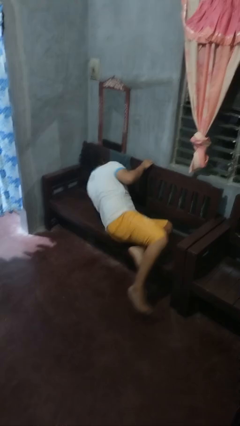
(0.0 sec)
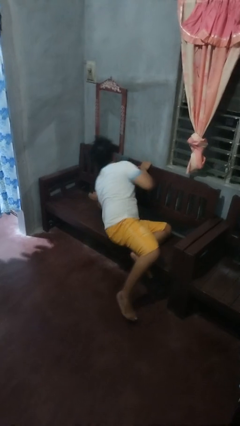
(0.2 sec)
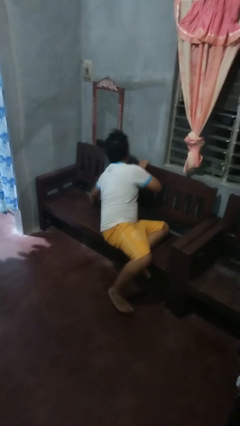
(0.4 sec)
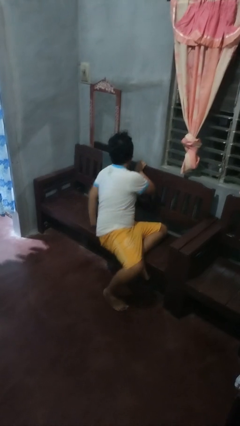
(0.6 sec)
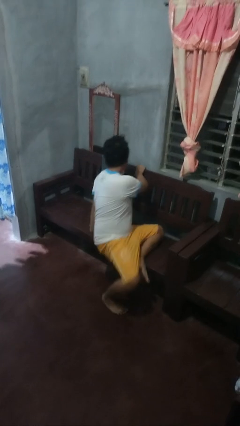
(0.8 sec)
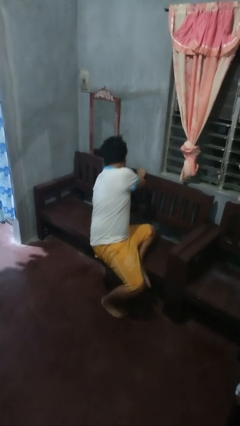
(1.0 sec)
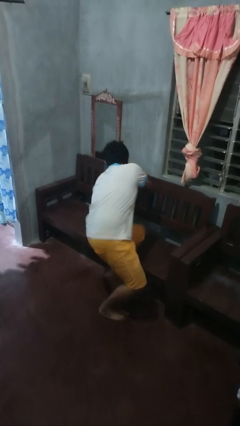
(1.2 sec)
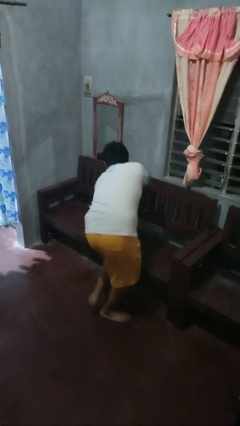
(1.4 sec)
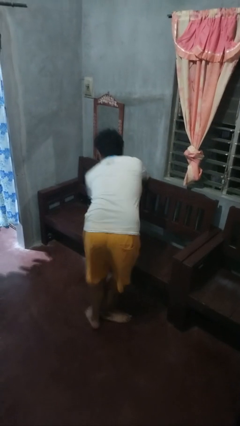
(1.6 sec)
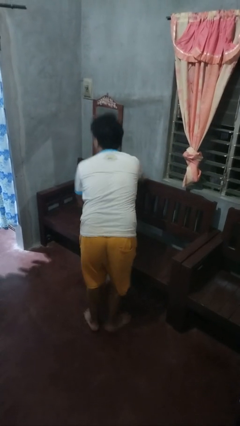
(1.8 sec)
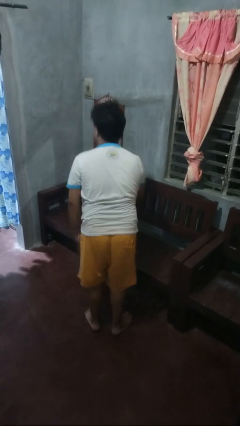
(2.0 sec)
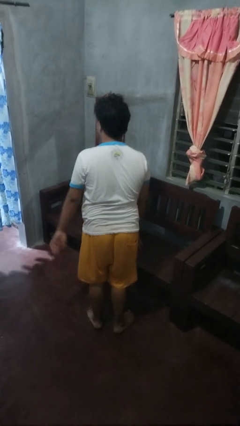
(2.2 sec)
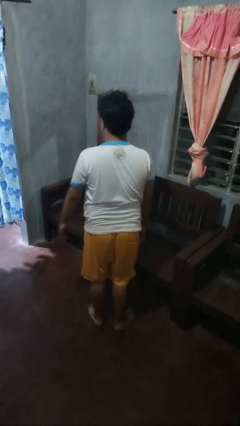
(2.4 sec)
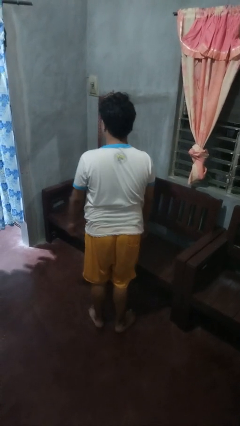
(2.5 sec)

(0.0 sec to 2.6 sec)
person stands up

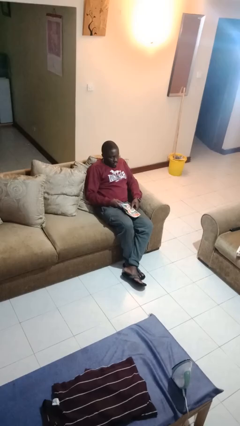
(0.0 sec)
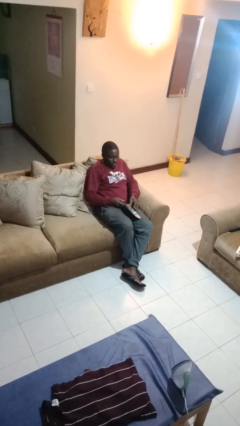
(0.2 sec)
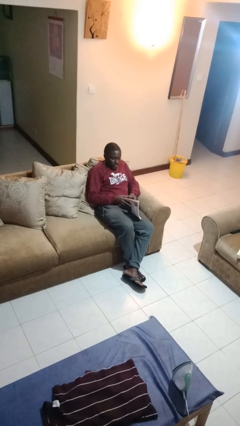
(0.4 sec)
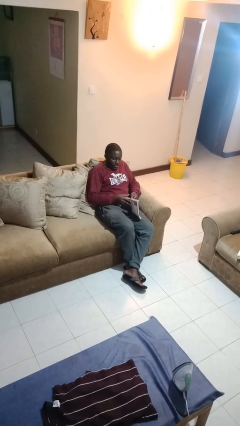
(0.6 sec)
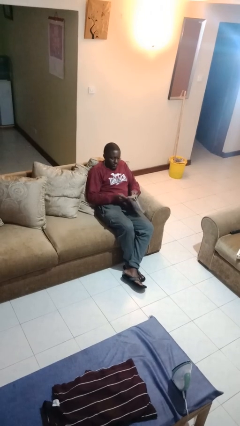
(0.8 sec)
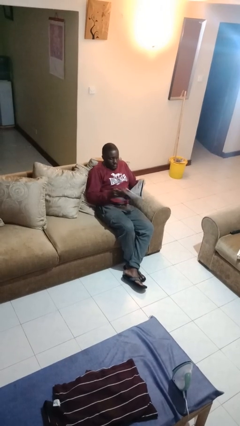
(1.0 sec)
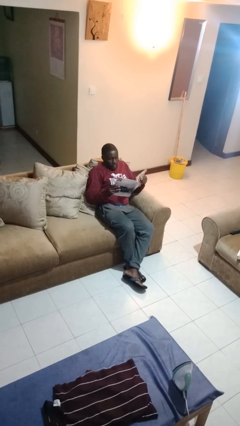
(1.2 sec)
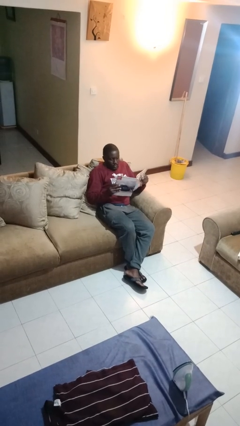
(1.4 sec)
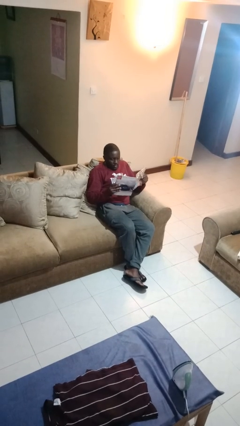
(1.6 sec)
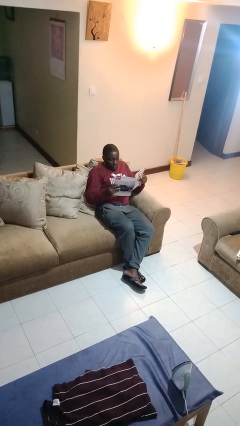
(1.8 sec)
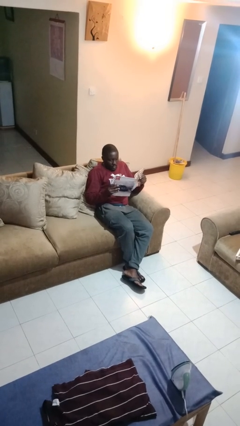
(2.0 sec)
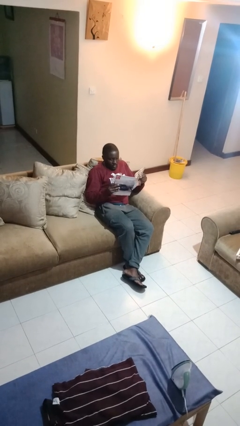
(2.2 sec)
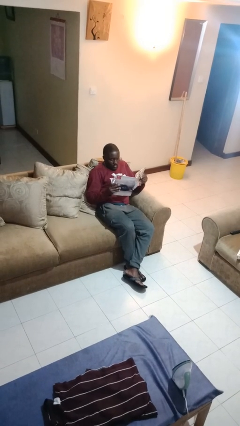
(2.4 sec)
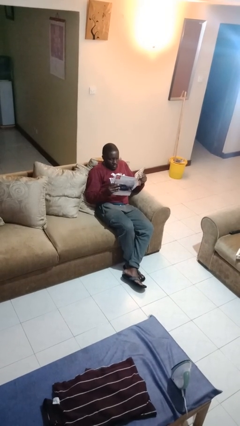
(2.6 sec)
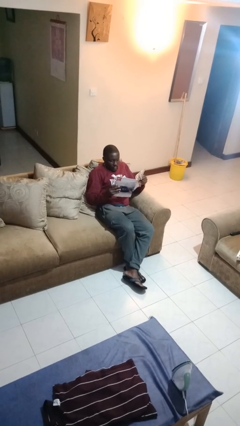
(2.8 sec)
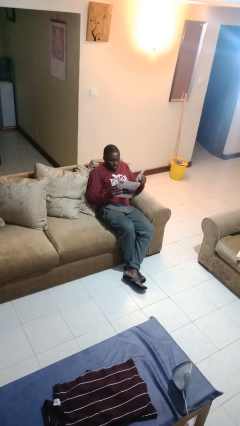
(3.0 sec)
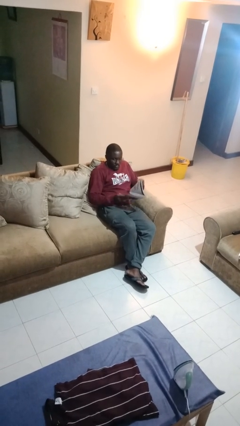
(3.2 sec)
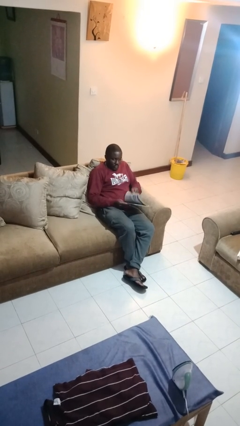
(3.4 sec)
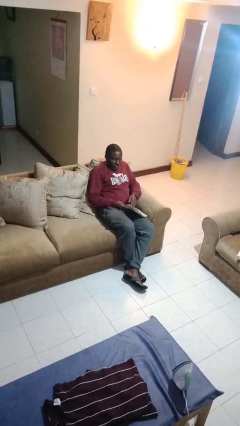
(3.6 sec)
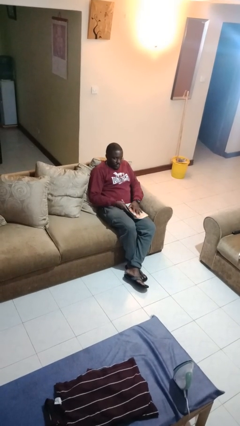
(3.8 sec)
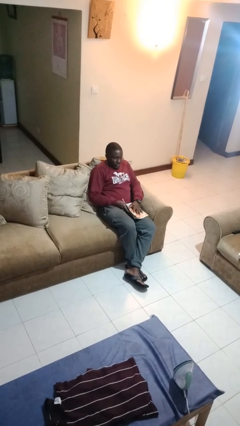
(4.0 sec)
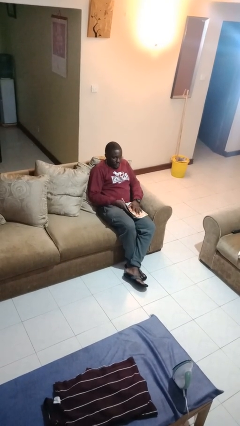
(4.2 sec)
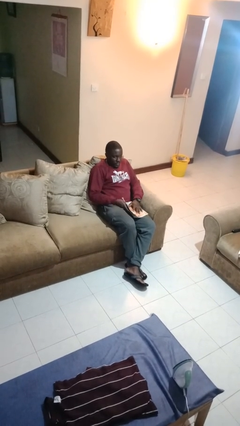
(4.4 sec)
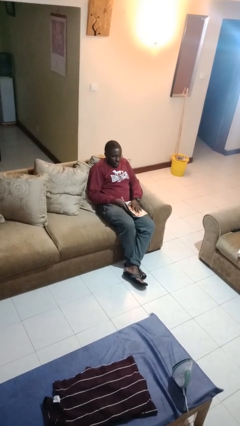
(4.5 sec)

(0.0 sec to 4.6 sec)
person reads magazine

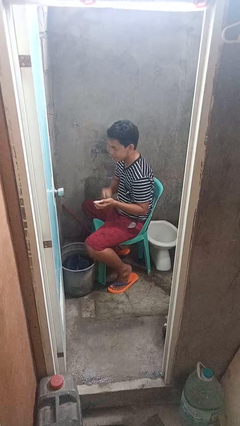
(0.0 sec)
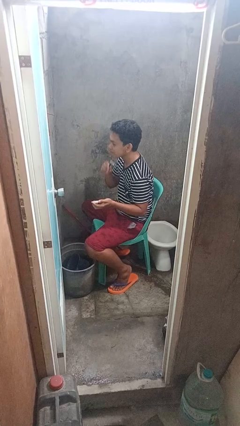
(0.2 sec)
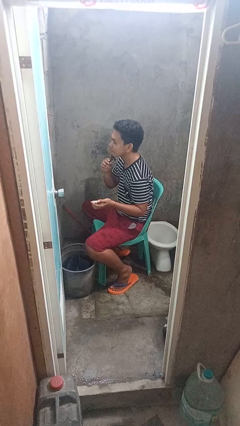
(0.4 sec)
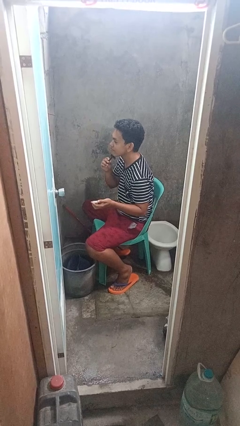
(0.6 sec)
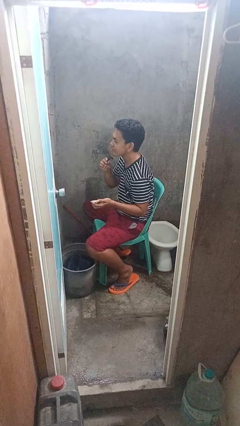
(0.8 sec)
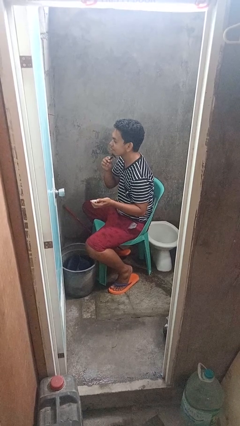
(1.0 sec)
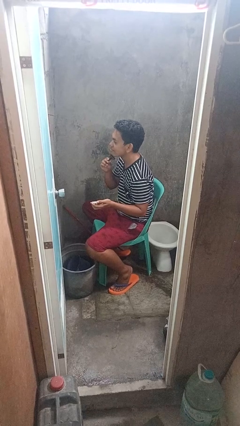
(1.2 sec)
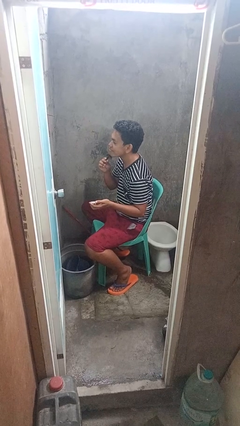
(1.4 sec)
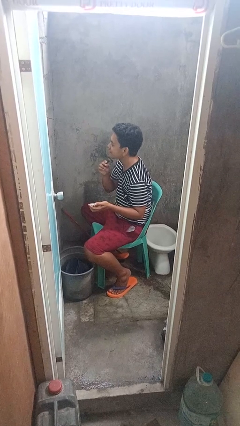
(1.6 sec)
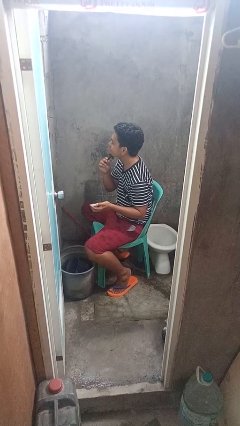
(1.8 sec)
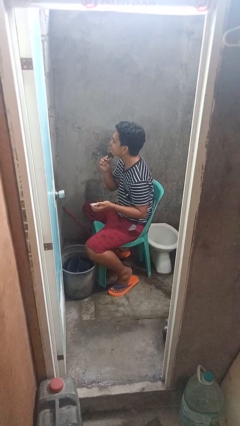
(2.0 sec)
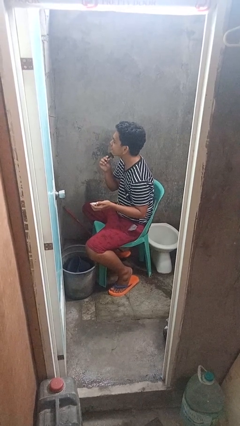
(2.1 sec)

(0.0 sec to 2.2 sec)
person shaves face

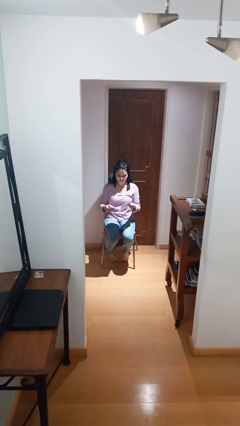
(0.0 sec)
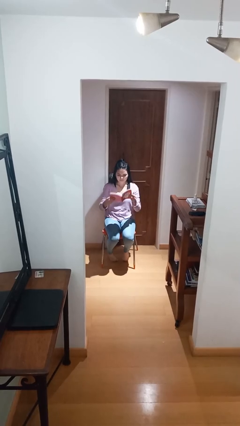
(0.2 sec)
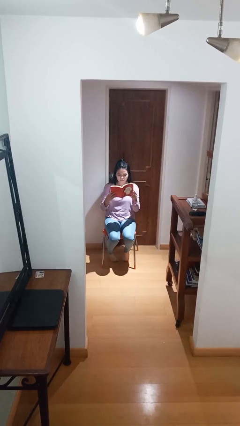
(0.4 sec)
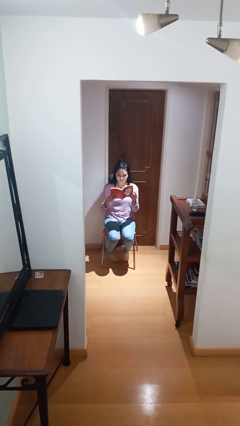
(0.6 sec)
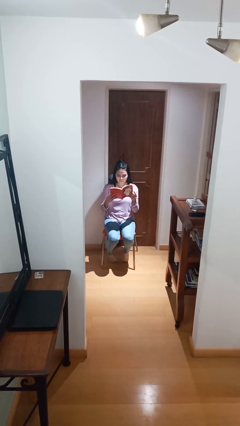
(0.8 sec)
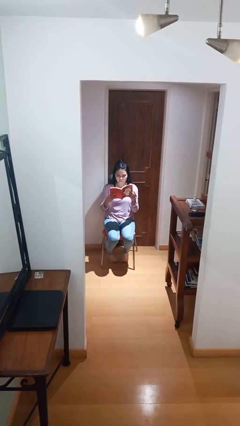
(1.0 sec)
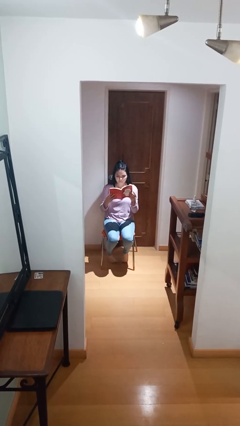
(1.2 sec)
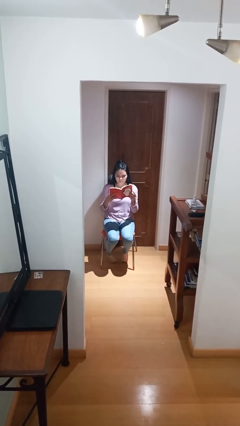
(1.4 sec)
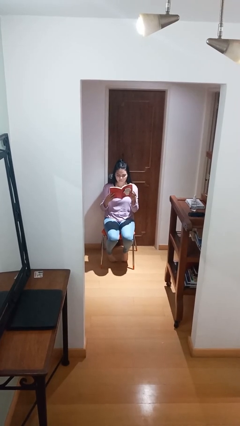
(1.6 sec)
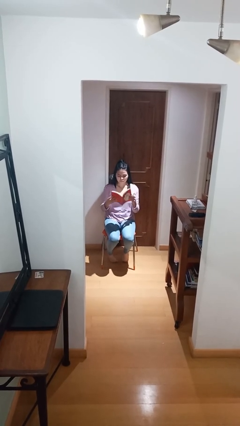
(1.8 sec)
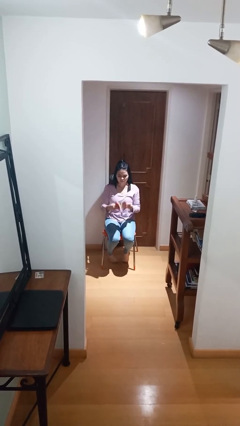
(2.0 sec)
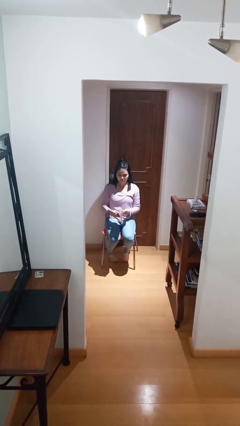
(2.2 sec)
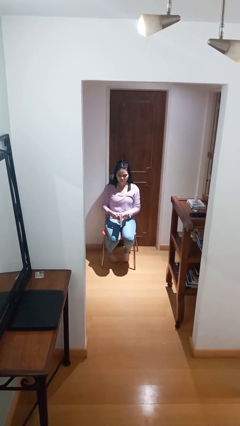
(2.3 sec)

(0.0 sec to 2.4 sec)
person reads document

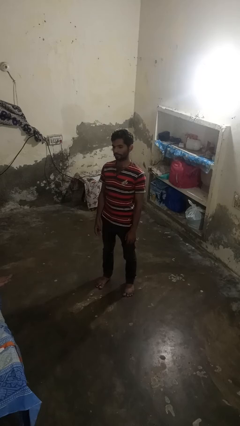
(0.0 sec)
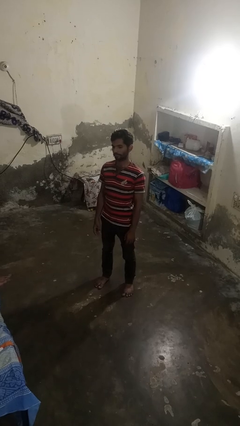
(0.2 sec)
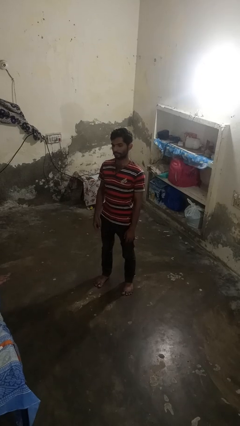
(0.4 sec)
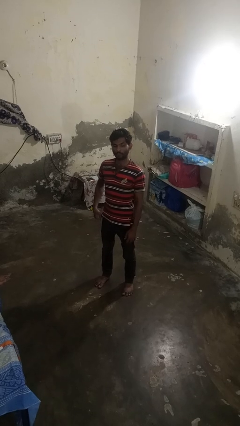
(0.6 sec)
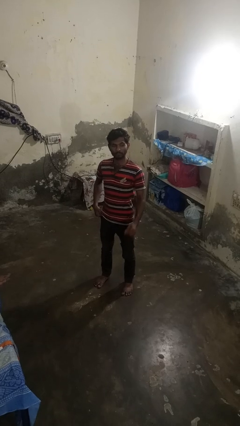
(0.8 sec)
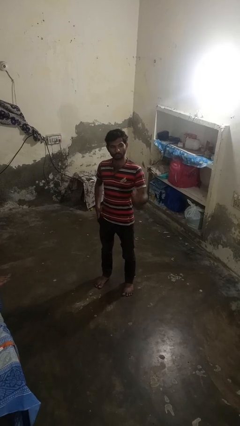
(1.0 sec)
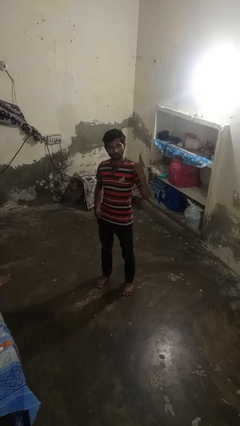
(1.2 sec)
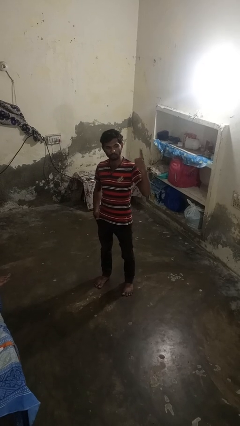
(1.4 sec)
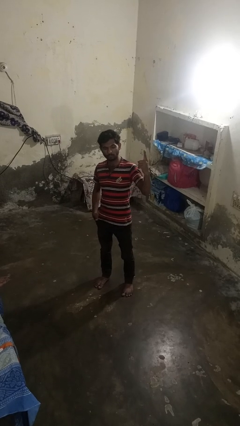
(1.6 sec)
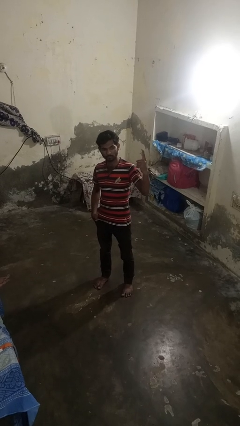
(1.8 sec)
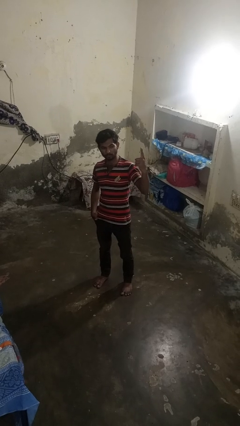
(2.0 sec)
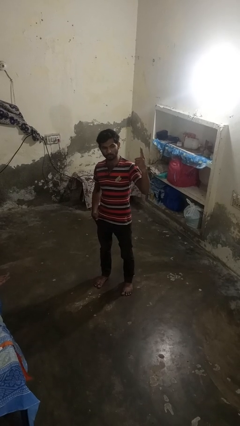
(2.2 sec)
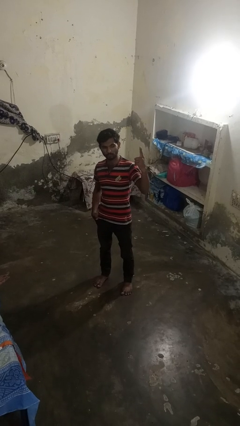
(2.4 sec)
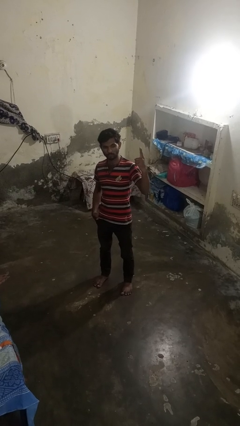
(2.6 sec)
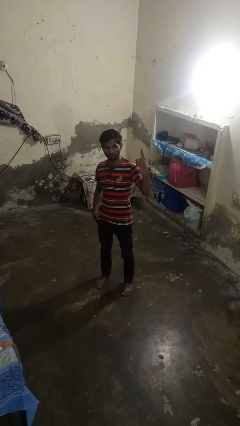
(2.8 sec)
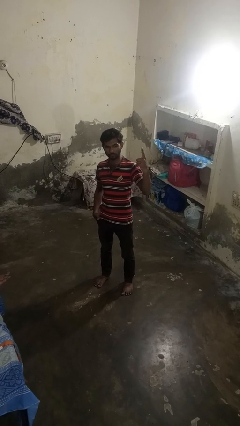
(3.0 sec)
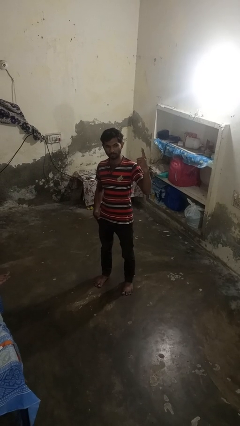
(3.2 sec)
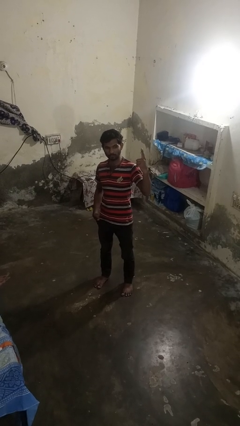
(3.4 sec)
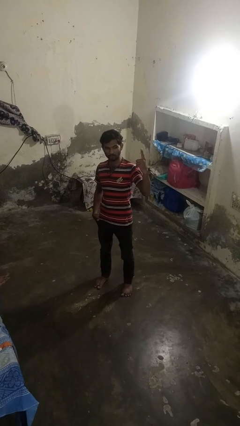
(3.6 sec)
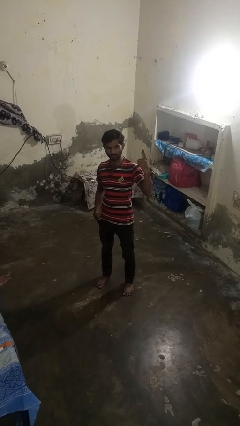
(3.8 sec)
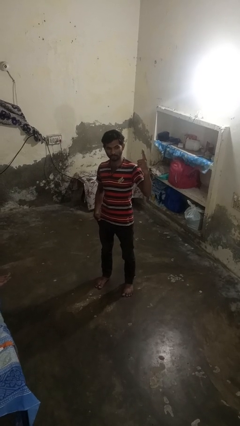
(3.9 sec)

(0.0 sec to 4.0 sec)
person gestures number one

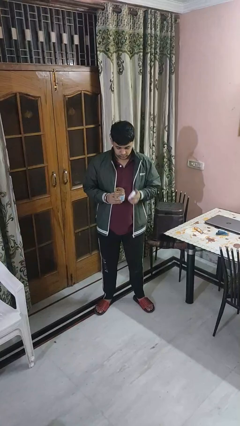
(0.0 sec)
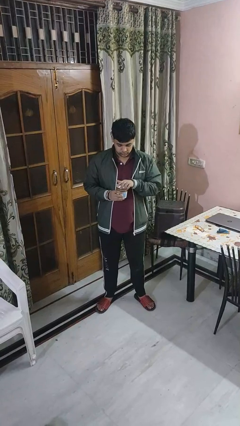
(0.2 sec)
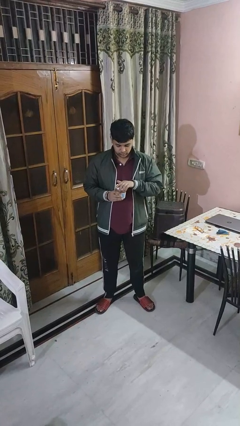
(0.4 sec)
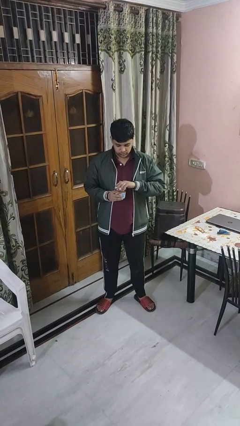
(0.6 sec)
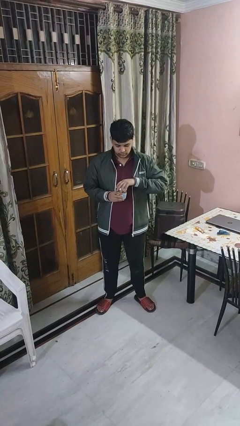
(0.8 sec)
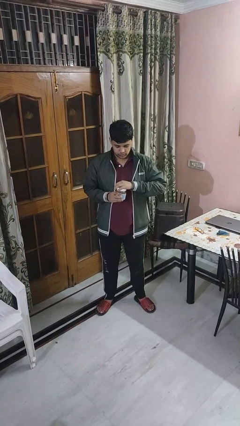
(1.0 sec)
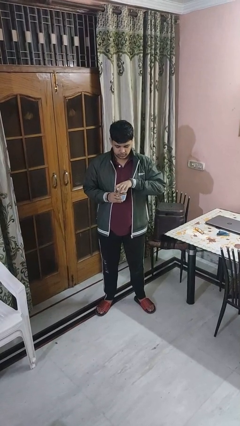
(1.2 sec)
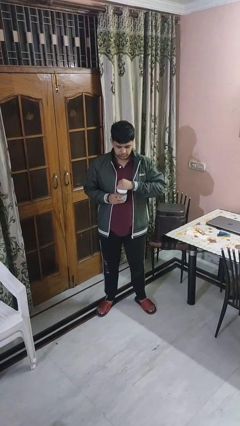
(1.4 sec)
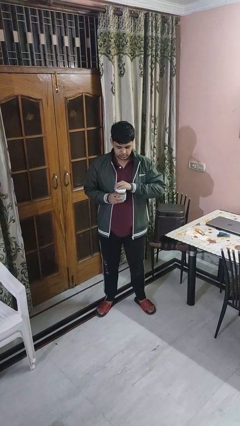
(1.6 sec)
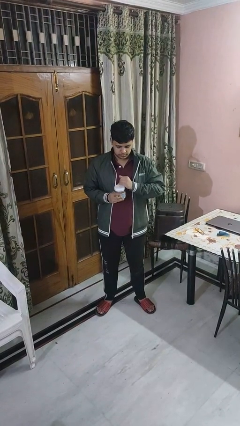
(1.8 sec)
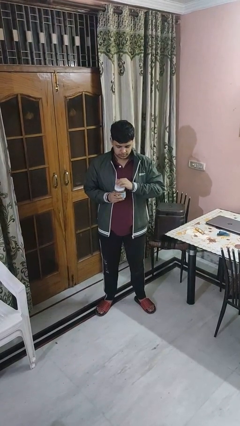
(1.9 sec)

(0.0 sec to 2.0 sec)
person closes jar
